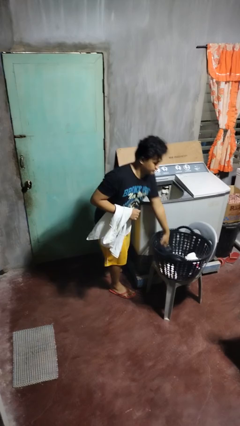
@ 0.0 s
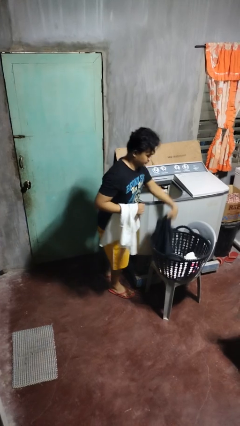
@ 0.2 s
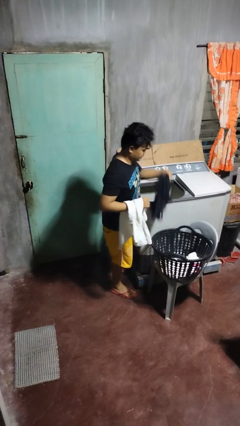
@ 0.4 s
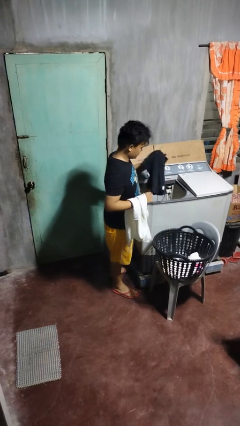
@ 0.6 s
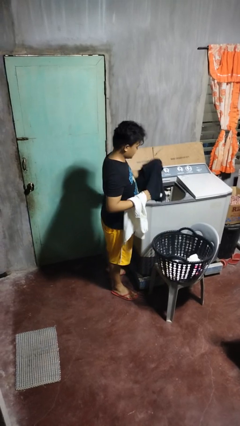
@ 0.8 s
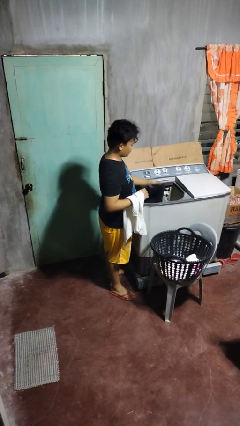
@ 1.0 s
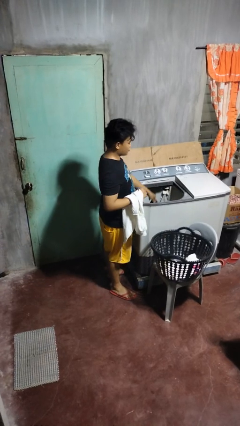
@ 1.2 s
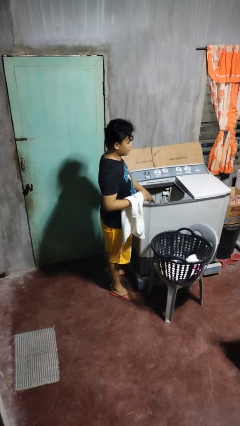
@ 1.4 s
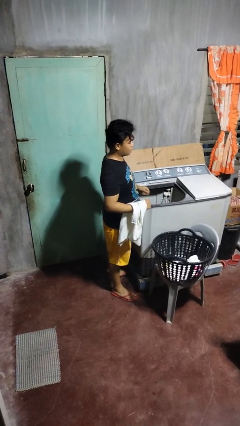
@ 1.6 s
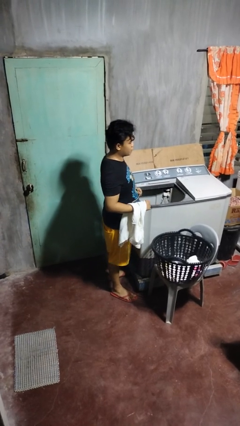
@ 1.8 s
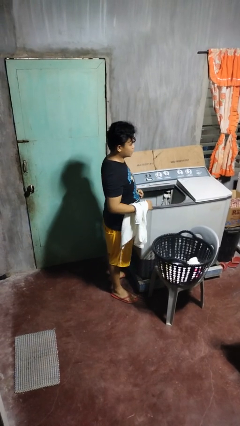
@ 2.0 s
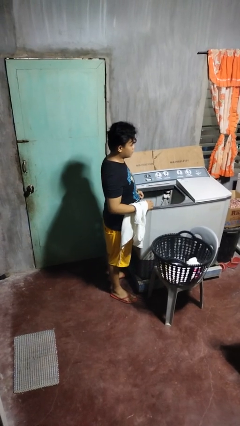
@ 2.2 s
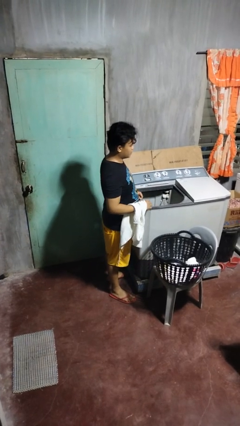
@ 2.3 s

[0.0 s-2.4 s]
person loads clotheswasher

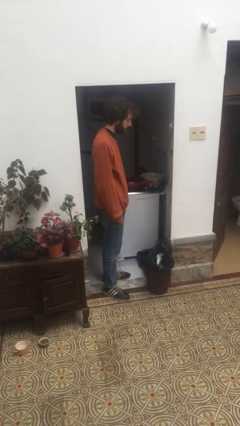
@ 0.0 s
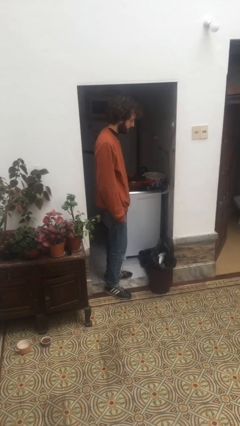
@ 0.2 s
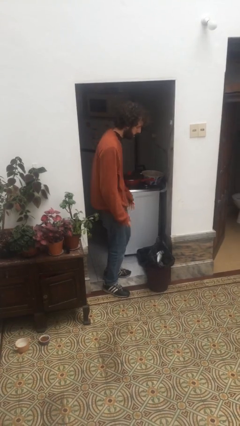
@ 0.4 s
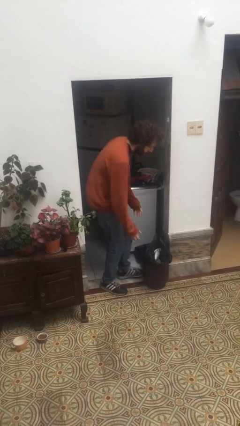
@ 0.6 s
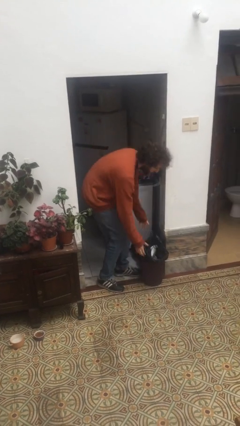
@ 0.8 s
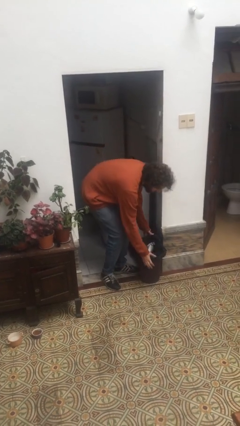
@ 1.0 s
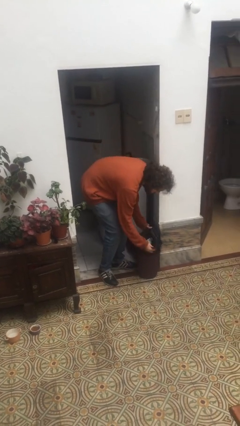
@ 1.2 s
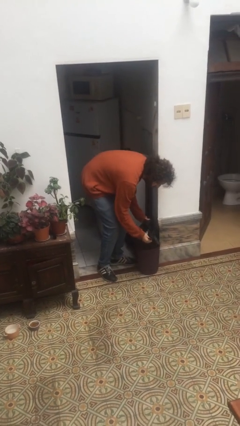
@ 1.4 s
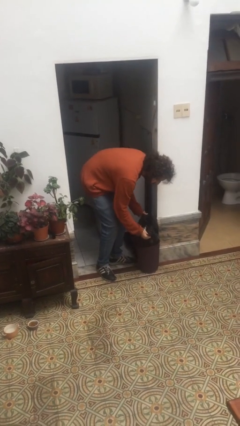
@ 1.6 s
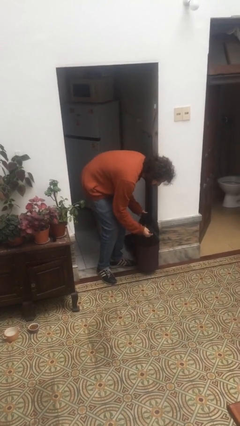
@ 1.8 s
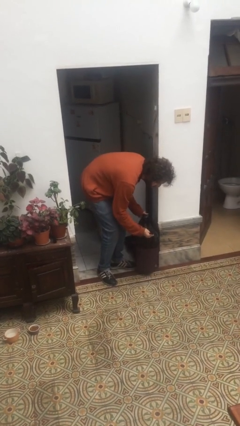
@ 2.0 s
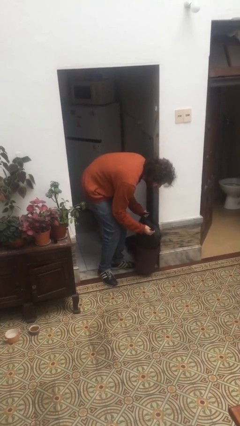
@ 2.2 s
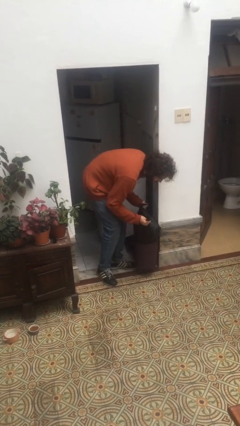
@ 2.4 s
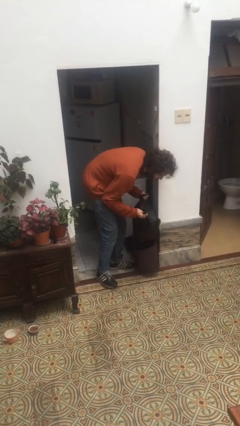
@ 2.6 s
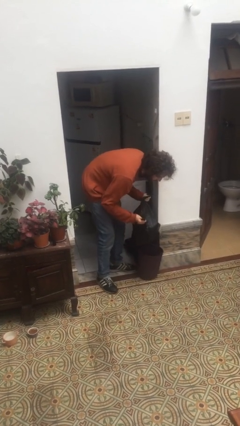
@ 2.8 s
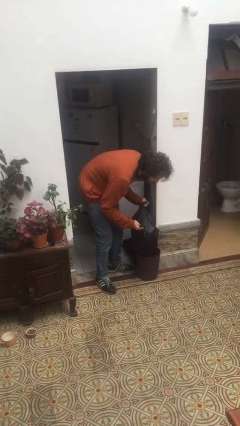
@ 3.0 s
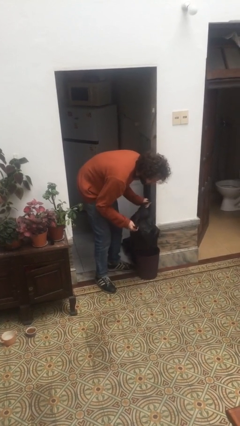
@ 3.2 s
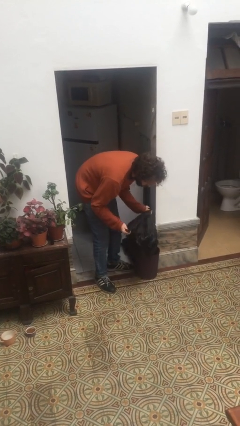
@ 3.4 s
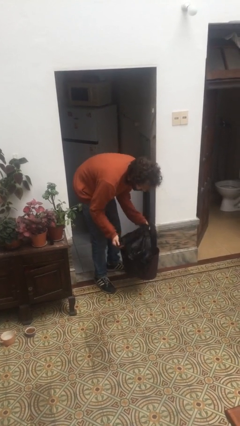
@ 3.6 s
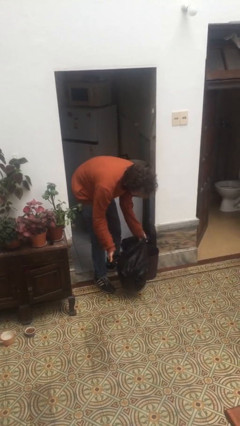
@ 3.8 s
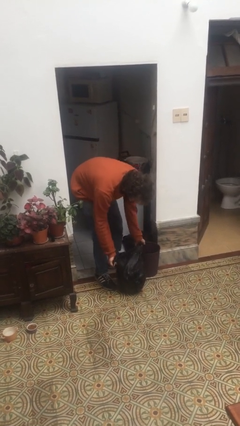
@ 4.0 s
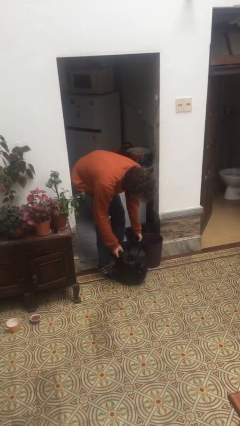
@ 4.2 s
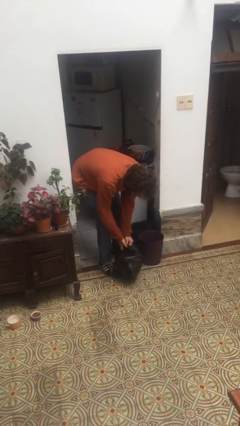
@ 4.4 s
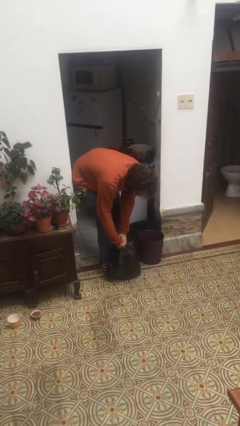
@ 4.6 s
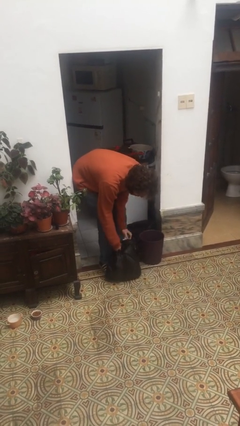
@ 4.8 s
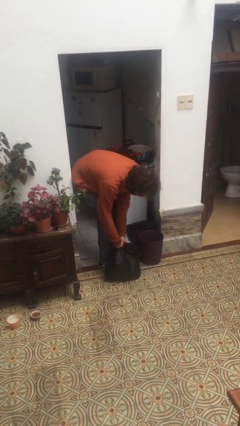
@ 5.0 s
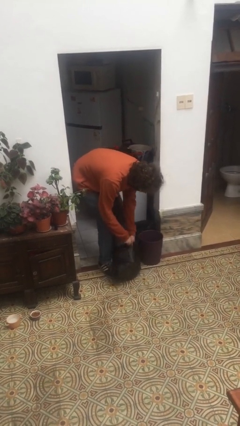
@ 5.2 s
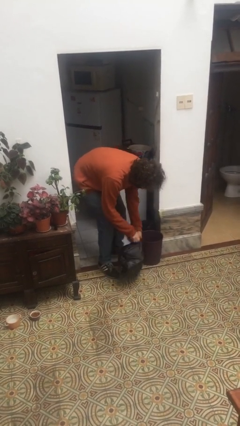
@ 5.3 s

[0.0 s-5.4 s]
person removes trashbag from trashcan

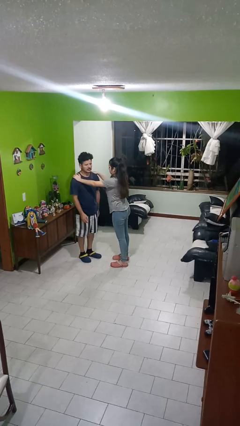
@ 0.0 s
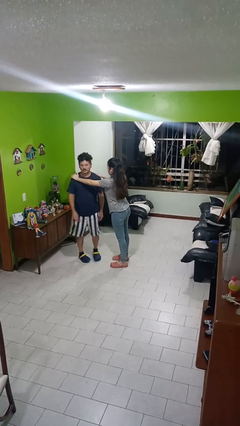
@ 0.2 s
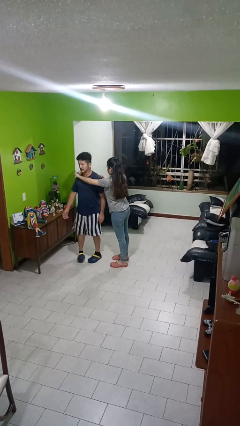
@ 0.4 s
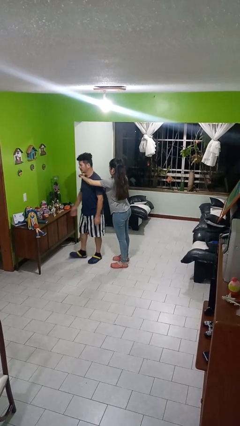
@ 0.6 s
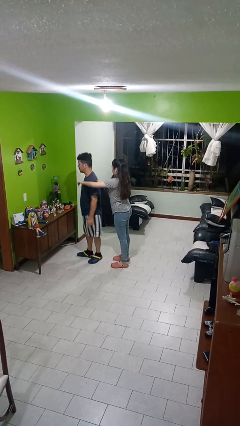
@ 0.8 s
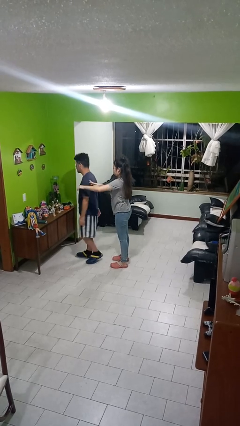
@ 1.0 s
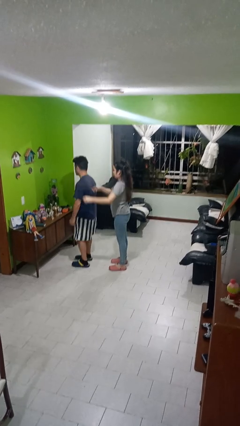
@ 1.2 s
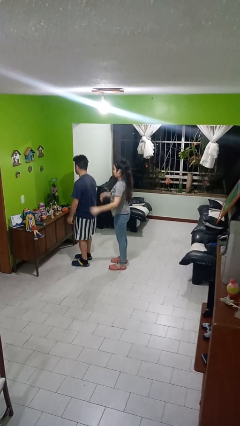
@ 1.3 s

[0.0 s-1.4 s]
person spins person around

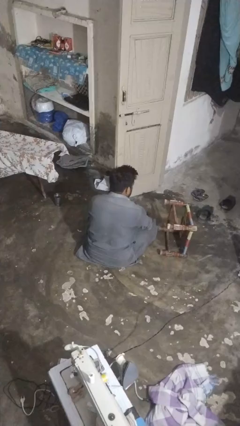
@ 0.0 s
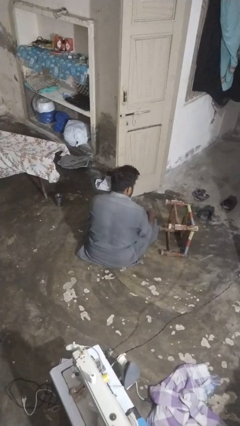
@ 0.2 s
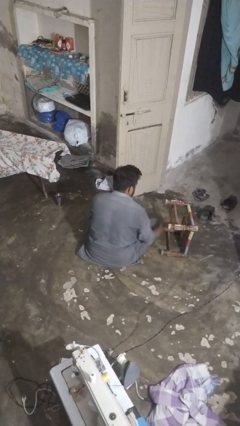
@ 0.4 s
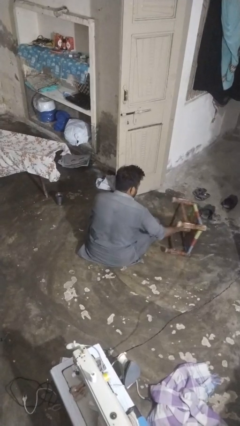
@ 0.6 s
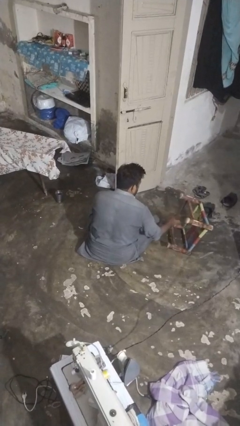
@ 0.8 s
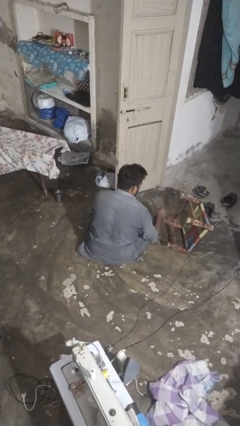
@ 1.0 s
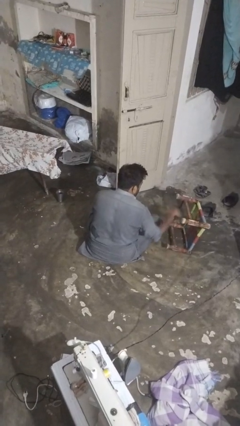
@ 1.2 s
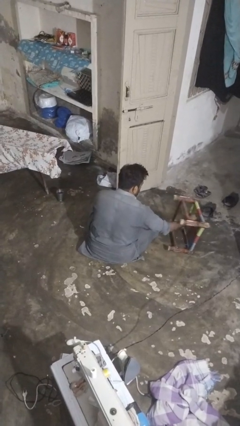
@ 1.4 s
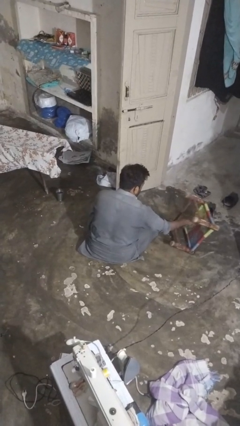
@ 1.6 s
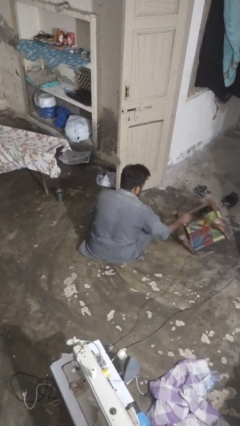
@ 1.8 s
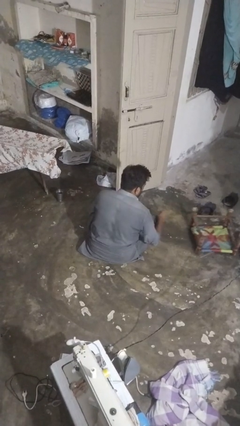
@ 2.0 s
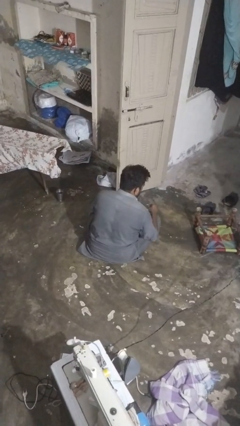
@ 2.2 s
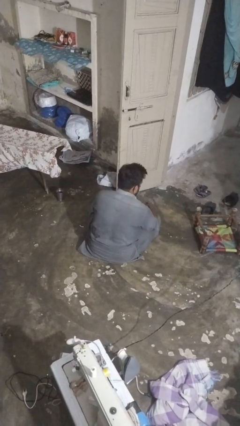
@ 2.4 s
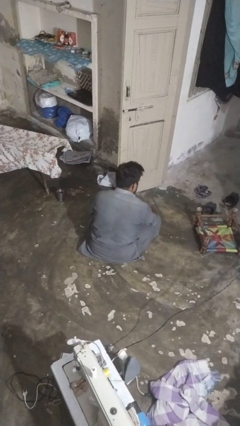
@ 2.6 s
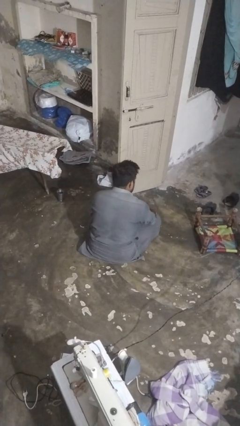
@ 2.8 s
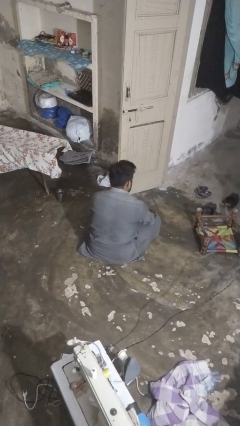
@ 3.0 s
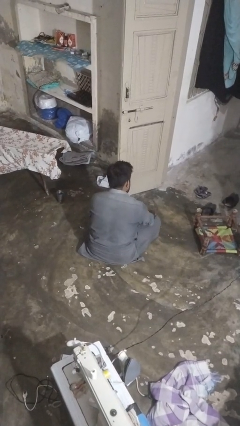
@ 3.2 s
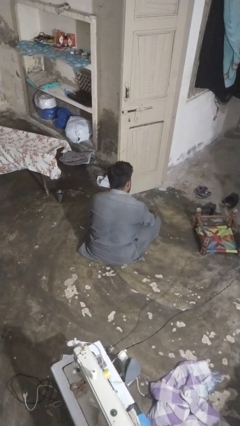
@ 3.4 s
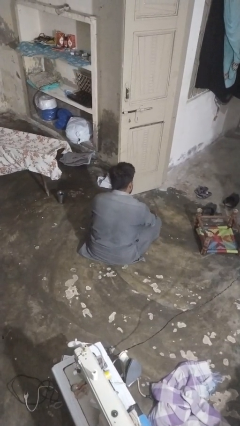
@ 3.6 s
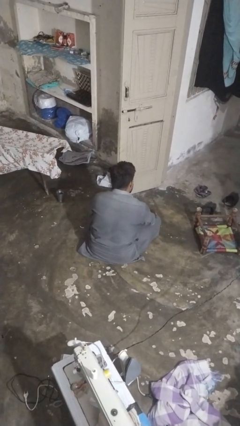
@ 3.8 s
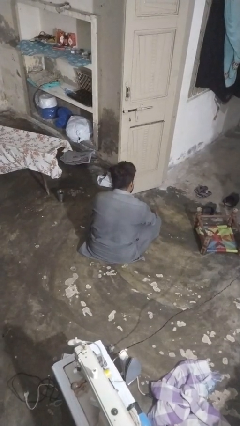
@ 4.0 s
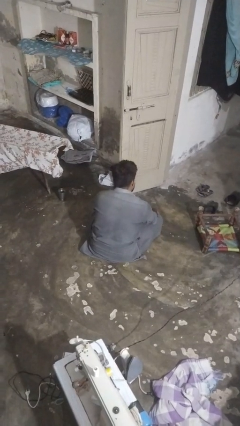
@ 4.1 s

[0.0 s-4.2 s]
person knocks over furniture

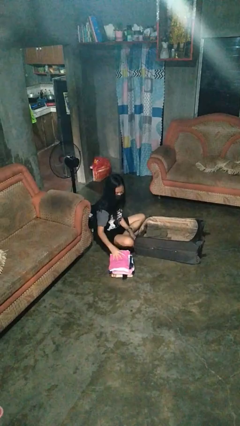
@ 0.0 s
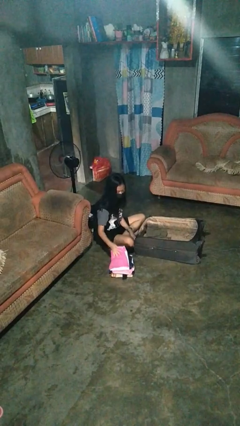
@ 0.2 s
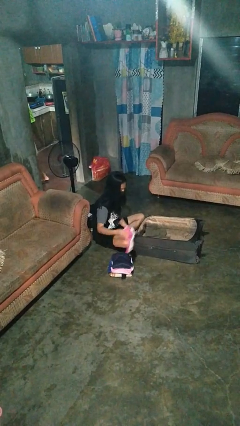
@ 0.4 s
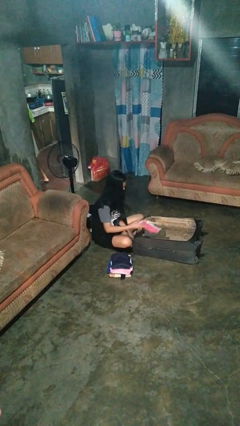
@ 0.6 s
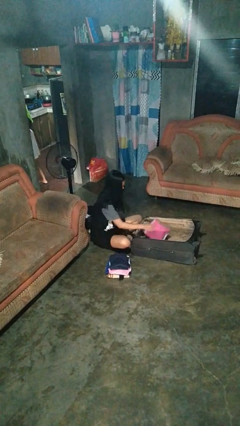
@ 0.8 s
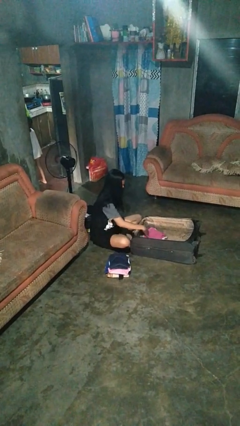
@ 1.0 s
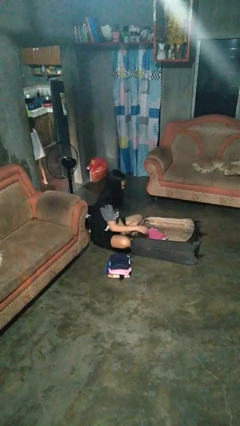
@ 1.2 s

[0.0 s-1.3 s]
person loads clothes into suitcase

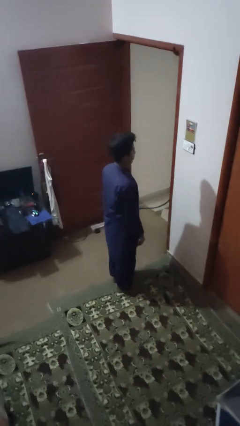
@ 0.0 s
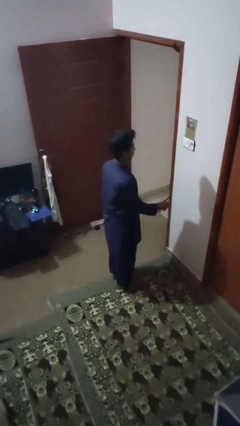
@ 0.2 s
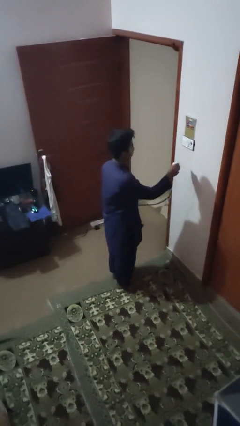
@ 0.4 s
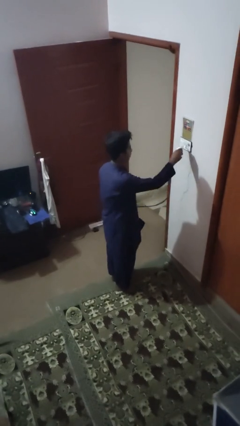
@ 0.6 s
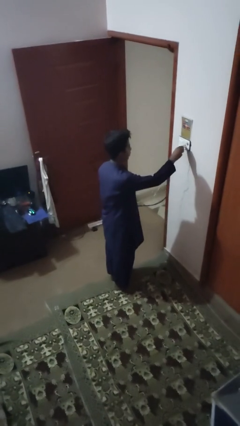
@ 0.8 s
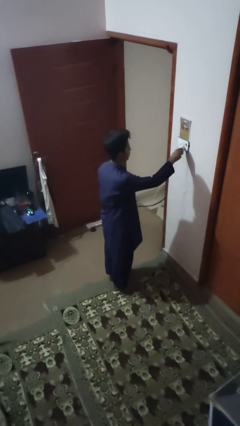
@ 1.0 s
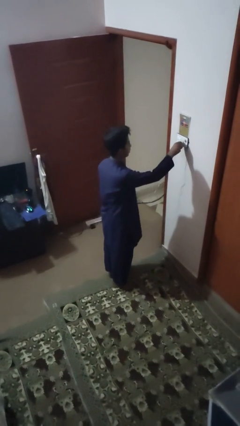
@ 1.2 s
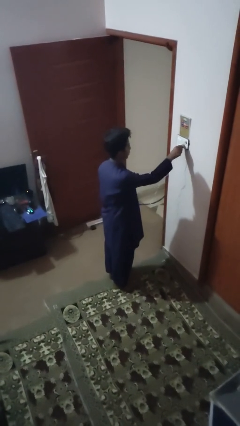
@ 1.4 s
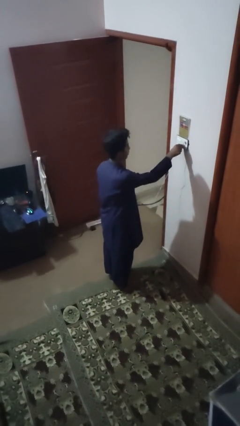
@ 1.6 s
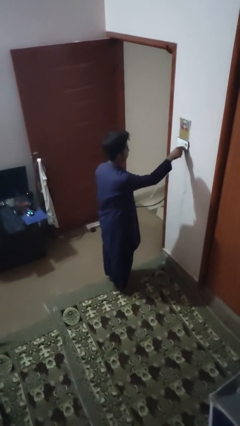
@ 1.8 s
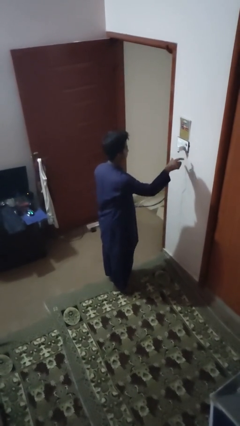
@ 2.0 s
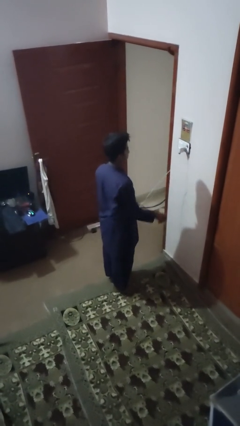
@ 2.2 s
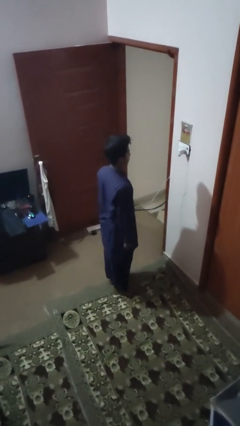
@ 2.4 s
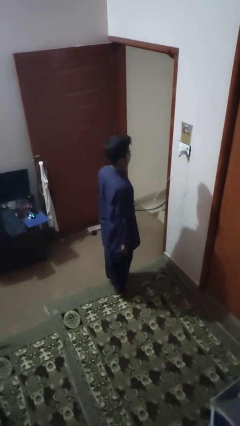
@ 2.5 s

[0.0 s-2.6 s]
person plugs into electrical socket
